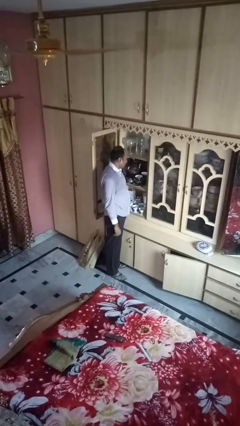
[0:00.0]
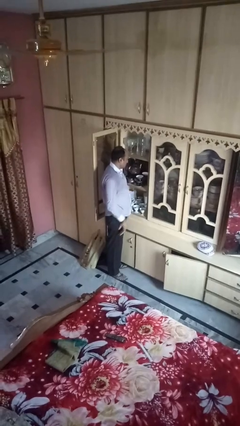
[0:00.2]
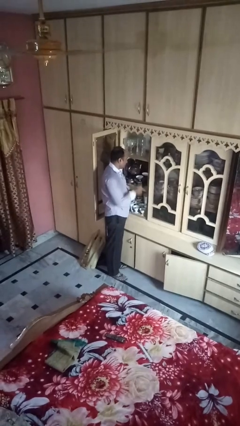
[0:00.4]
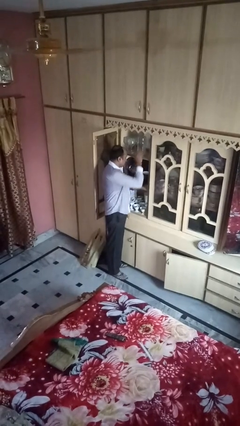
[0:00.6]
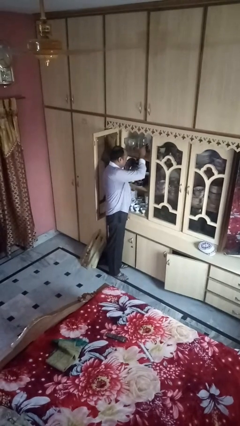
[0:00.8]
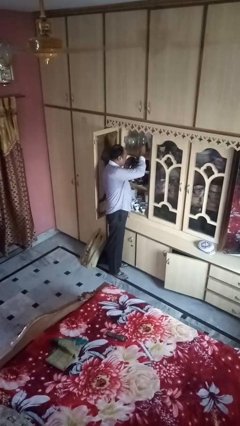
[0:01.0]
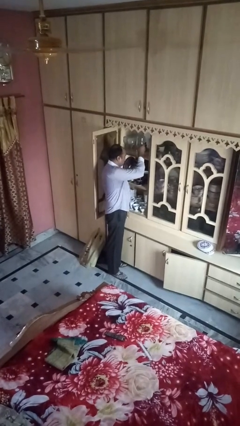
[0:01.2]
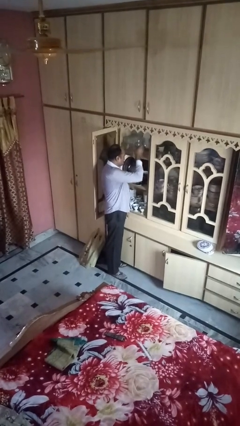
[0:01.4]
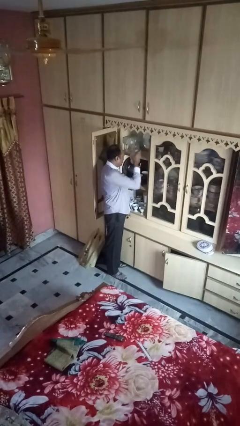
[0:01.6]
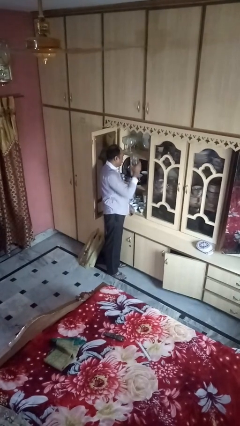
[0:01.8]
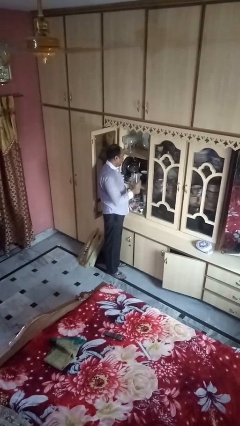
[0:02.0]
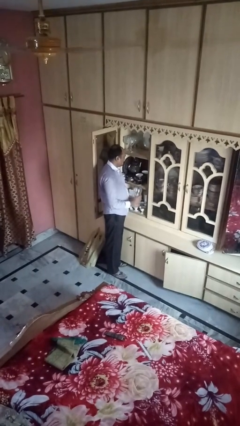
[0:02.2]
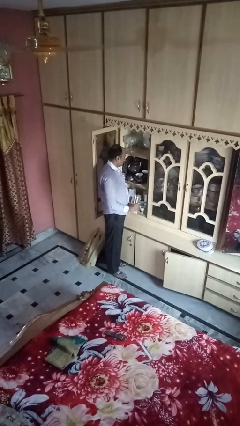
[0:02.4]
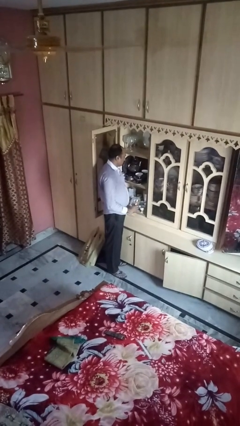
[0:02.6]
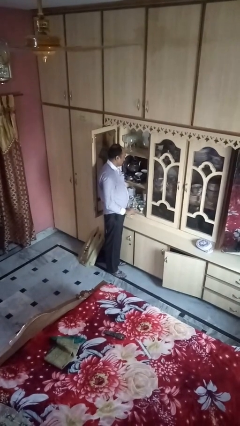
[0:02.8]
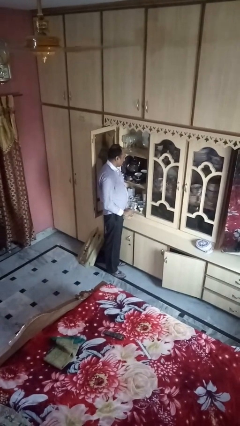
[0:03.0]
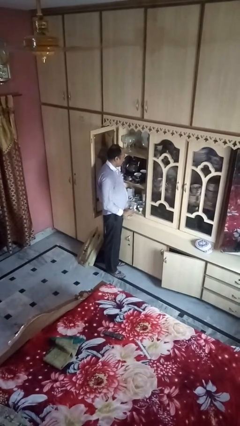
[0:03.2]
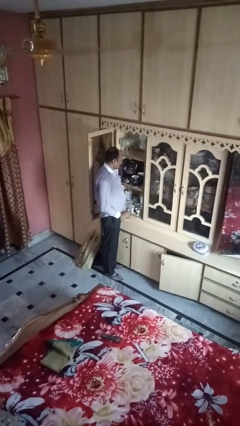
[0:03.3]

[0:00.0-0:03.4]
person picks up object from cabinet

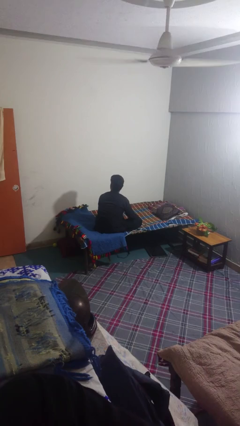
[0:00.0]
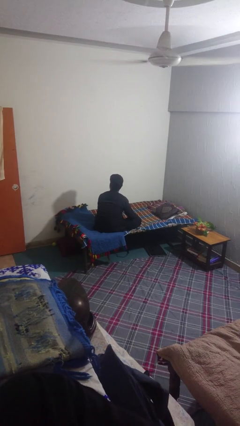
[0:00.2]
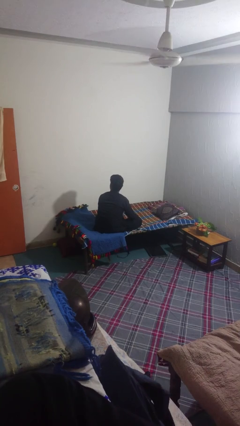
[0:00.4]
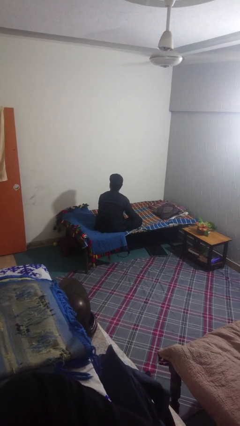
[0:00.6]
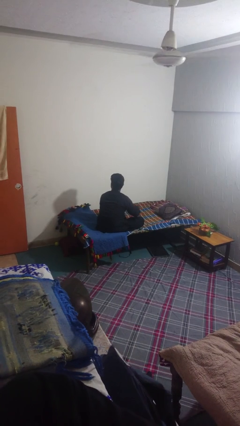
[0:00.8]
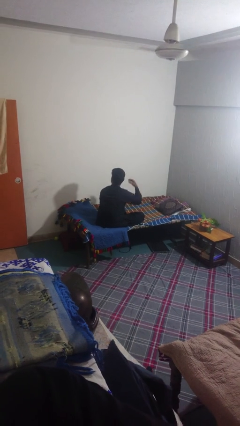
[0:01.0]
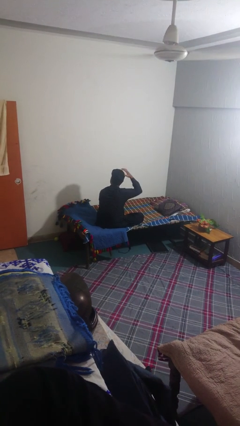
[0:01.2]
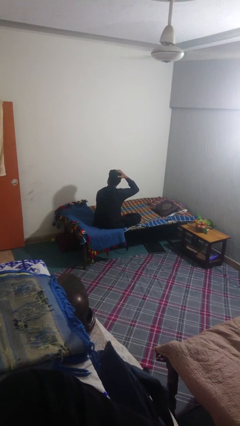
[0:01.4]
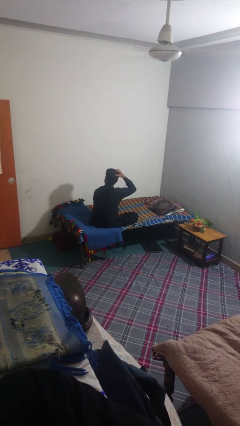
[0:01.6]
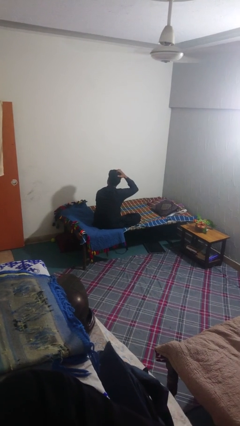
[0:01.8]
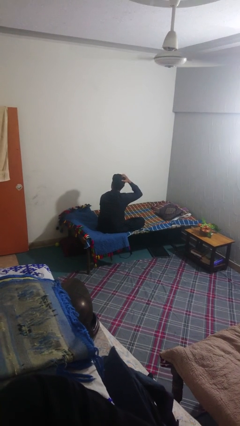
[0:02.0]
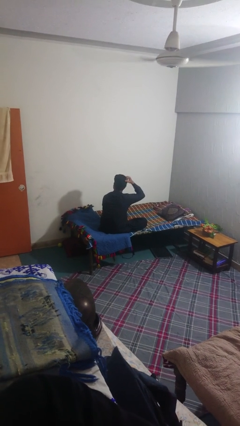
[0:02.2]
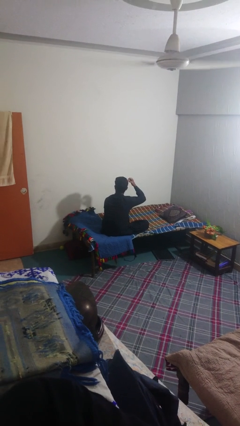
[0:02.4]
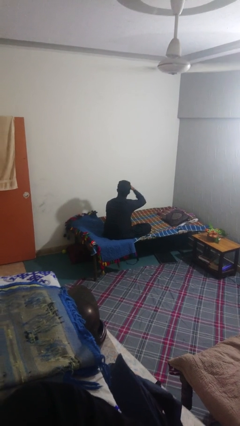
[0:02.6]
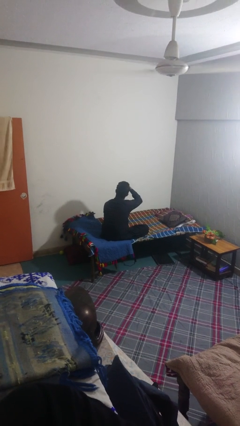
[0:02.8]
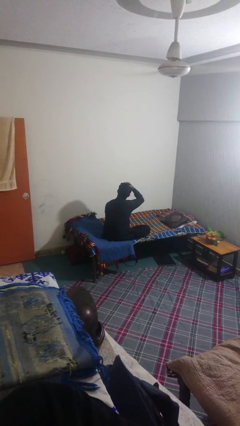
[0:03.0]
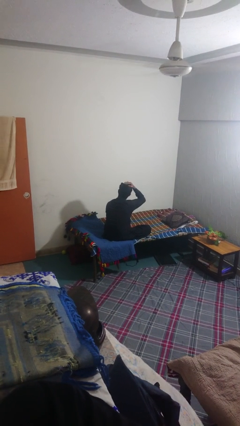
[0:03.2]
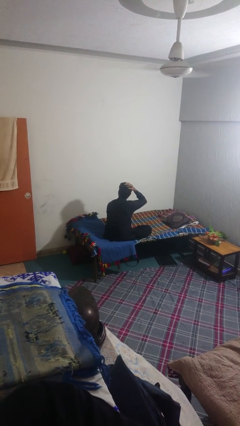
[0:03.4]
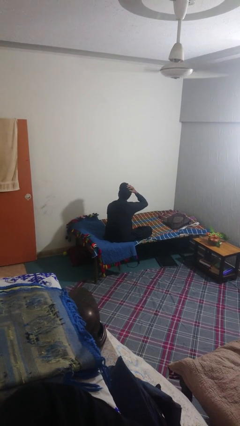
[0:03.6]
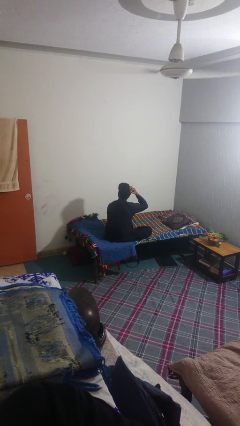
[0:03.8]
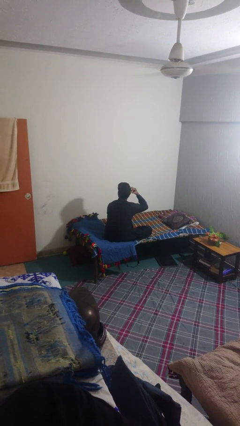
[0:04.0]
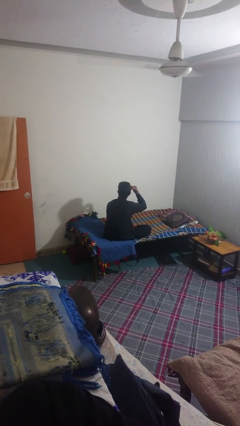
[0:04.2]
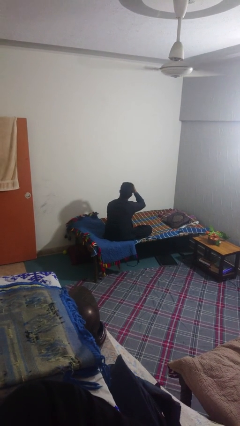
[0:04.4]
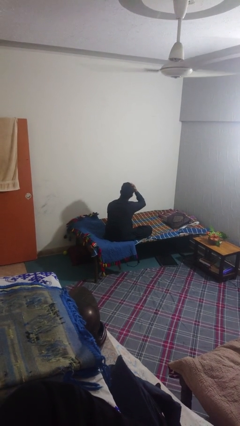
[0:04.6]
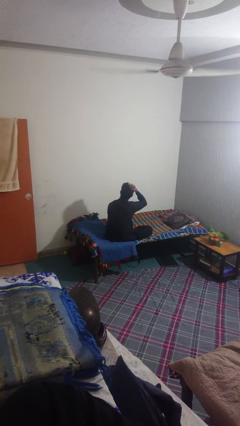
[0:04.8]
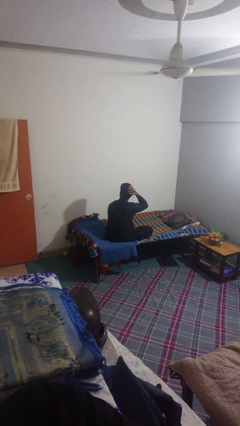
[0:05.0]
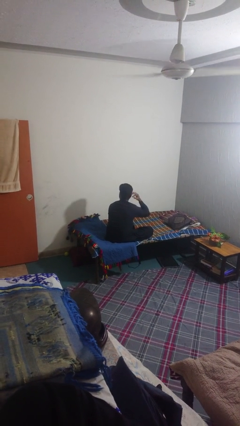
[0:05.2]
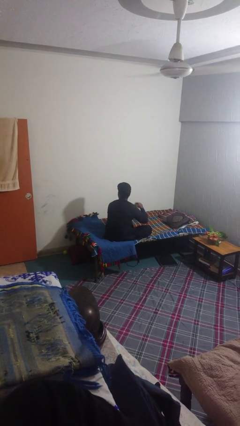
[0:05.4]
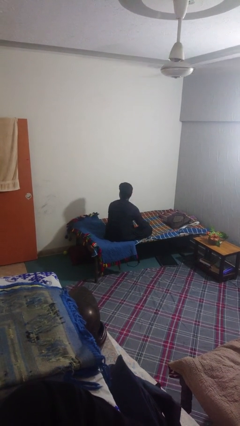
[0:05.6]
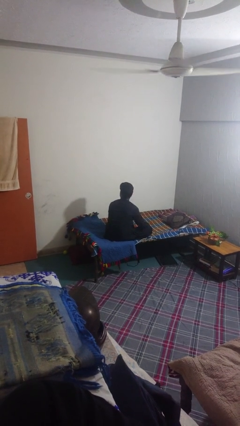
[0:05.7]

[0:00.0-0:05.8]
person strokes hair

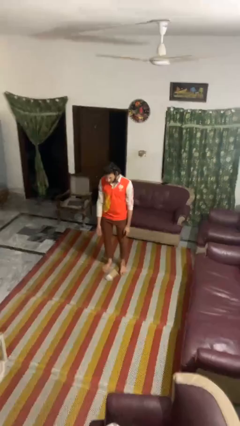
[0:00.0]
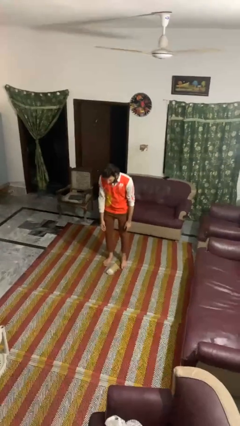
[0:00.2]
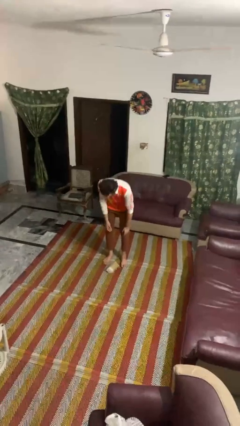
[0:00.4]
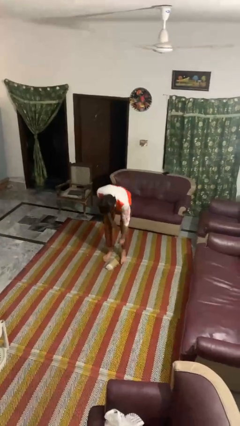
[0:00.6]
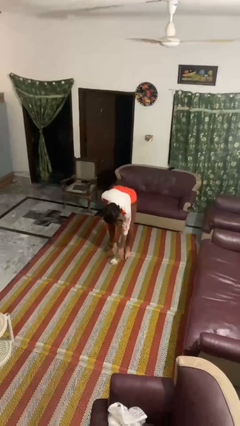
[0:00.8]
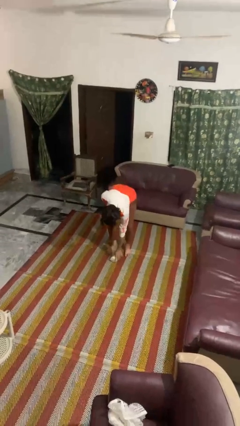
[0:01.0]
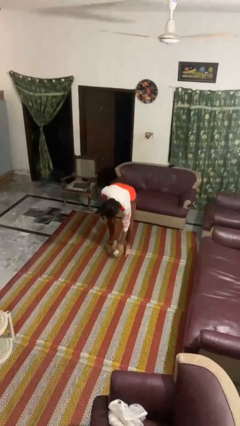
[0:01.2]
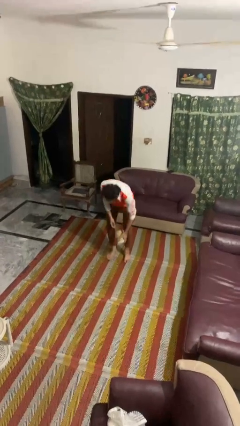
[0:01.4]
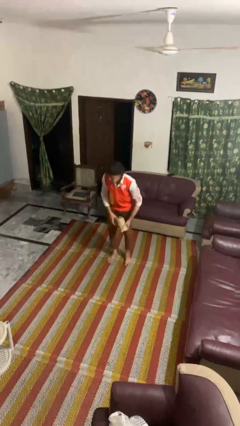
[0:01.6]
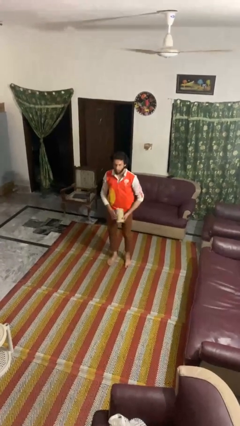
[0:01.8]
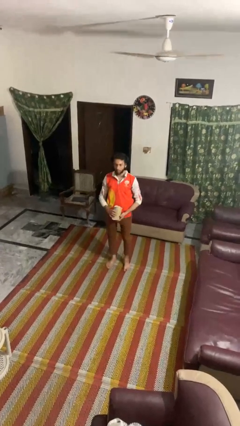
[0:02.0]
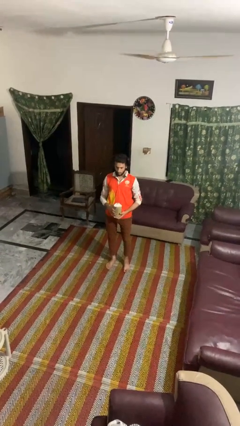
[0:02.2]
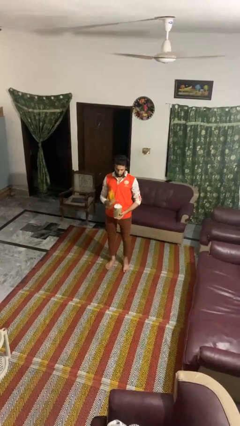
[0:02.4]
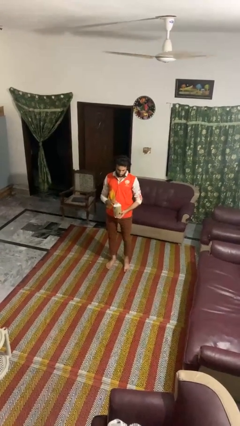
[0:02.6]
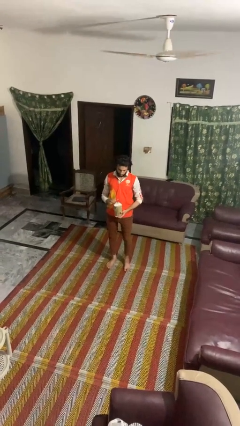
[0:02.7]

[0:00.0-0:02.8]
person picks up object from floor

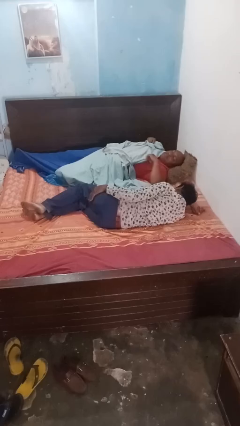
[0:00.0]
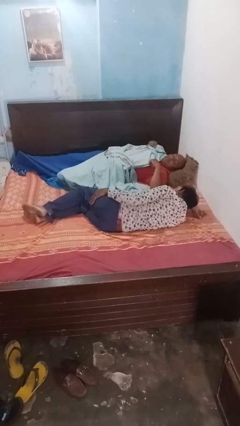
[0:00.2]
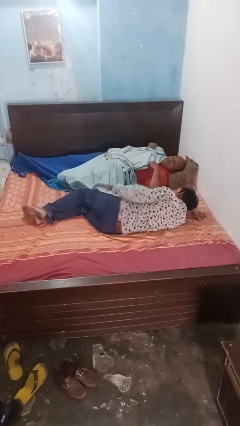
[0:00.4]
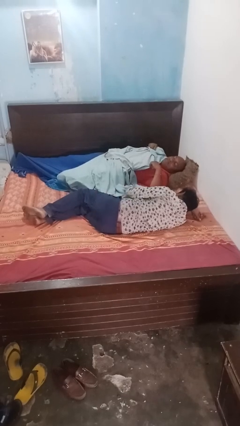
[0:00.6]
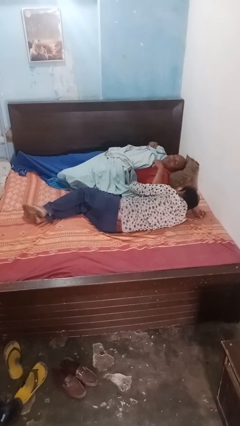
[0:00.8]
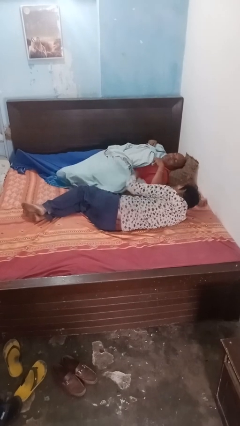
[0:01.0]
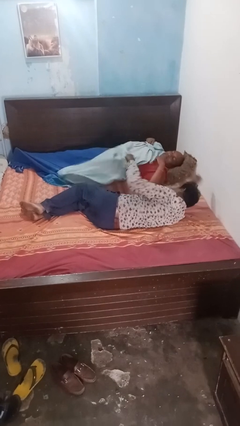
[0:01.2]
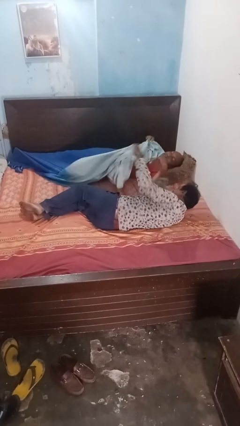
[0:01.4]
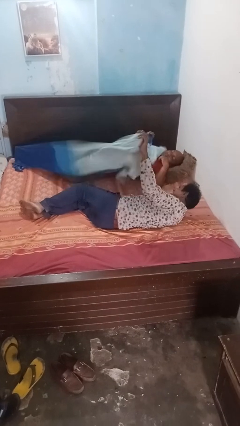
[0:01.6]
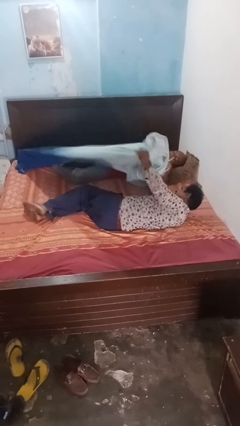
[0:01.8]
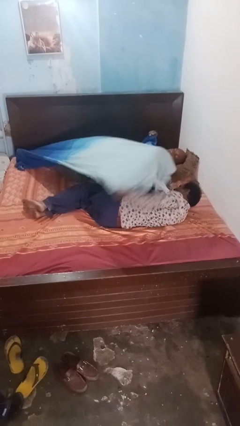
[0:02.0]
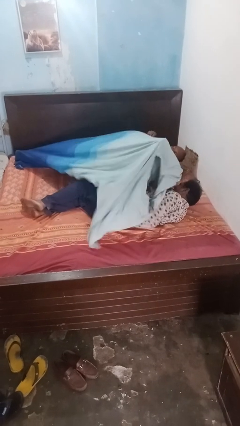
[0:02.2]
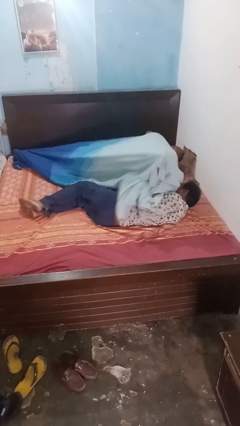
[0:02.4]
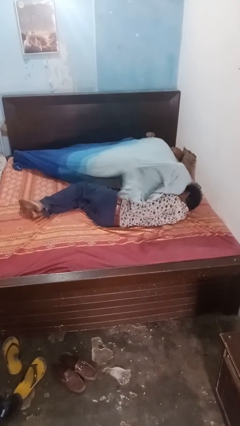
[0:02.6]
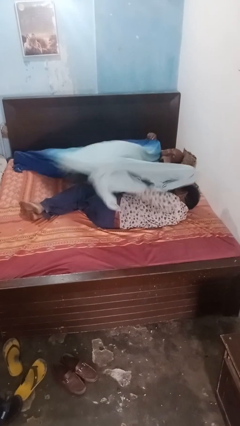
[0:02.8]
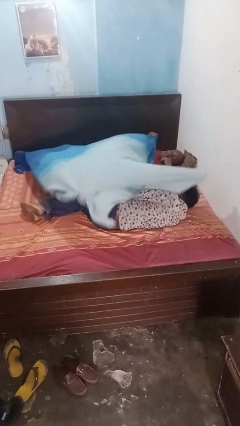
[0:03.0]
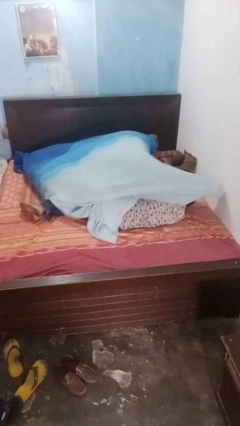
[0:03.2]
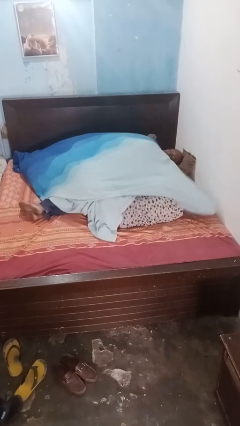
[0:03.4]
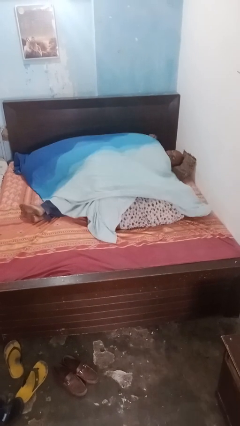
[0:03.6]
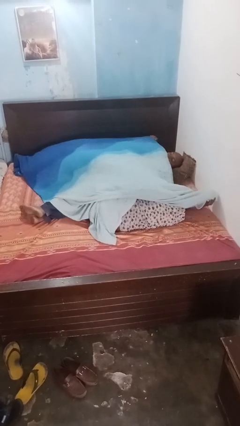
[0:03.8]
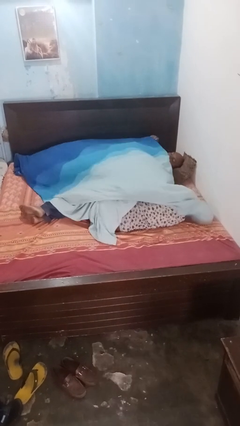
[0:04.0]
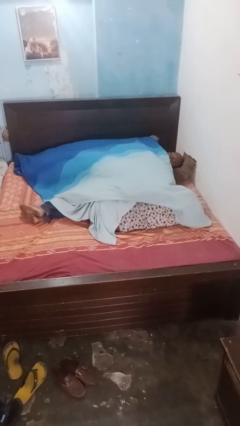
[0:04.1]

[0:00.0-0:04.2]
person covers friend with blanket

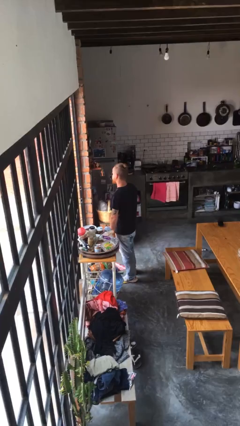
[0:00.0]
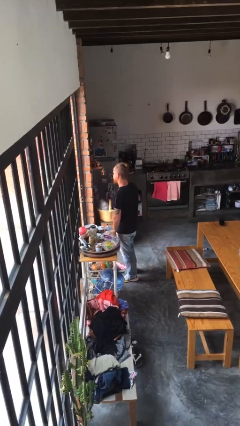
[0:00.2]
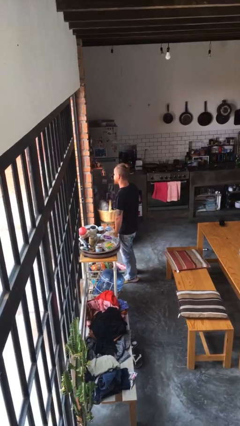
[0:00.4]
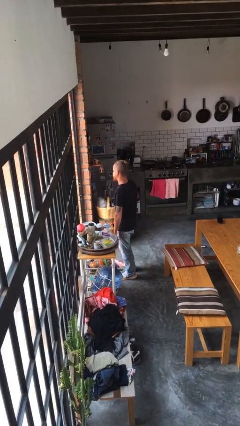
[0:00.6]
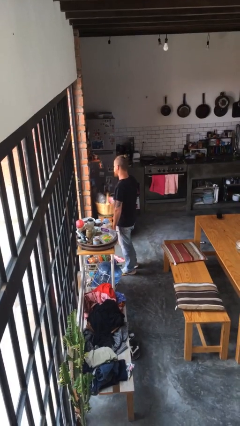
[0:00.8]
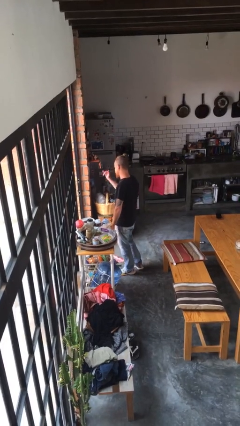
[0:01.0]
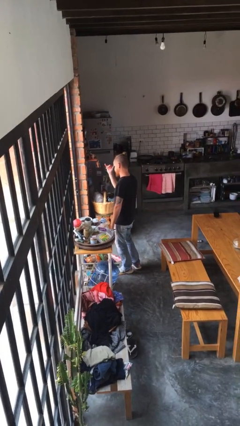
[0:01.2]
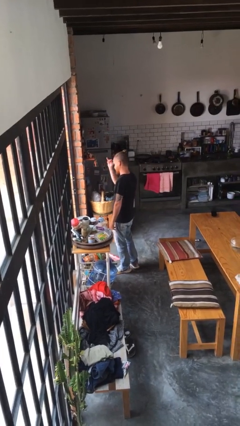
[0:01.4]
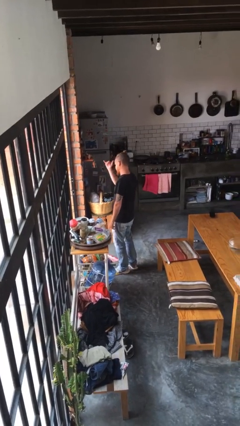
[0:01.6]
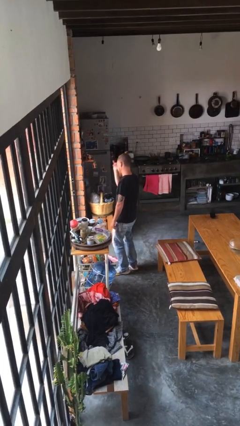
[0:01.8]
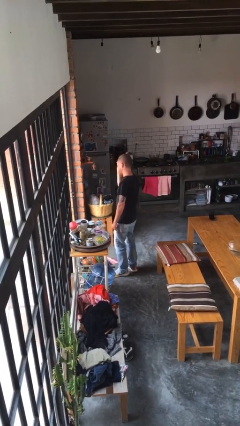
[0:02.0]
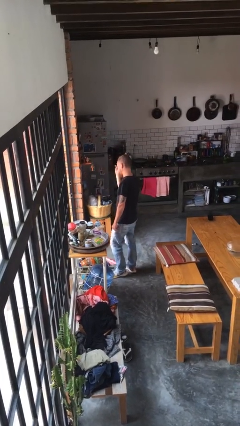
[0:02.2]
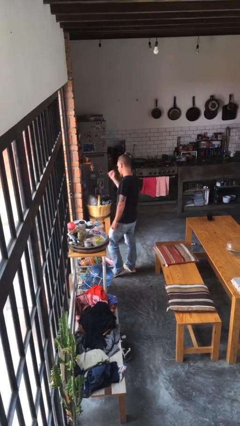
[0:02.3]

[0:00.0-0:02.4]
person gestures hang loose
